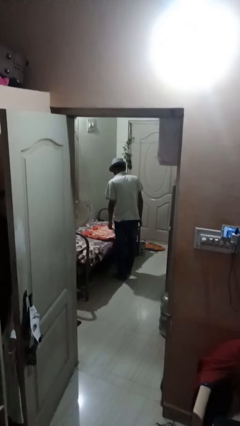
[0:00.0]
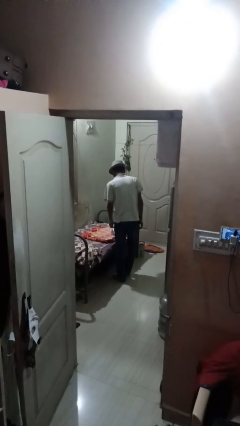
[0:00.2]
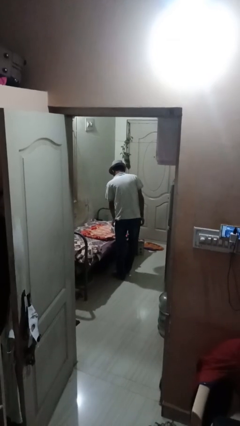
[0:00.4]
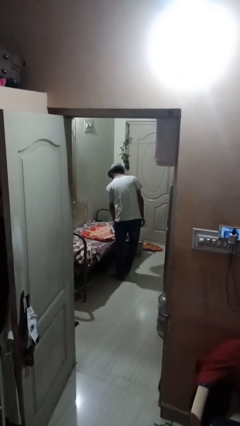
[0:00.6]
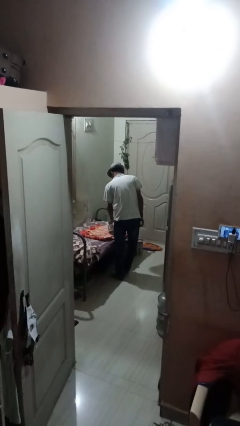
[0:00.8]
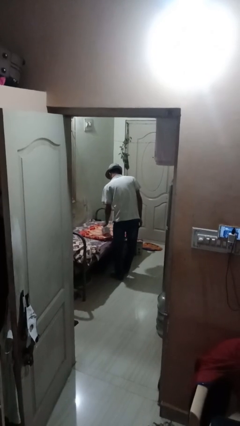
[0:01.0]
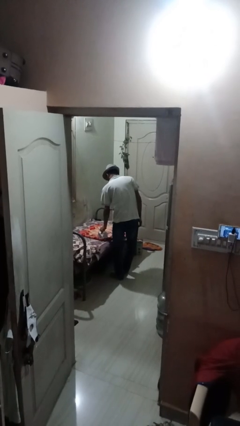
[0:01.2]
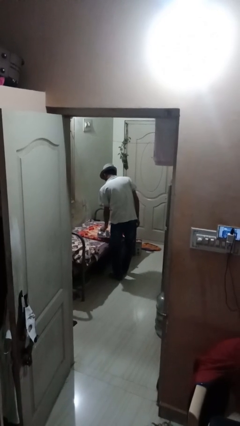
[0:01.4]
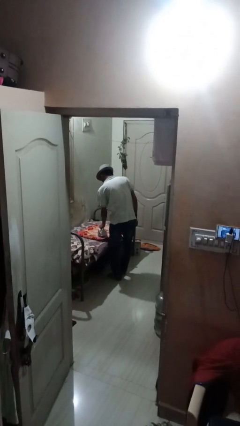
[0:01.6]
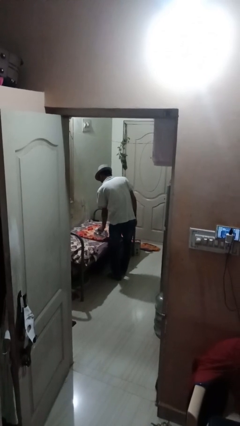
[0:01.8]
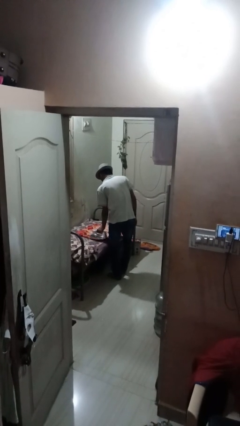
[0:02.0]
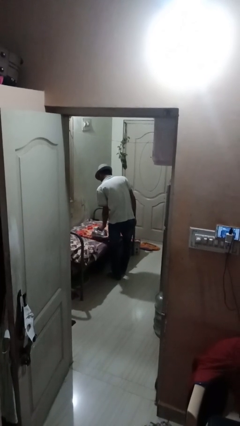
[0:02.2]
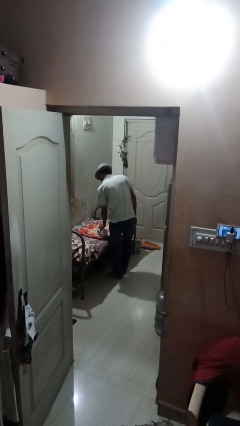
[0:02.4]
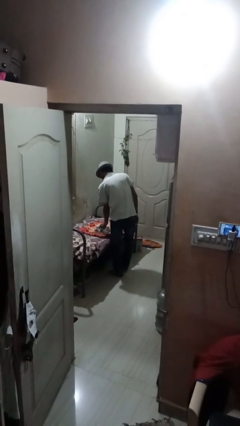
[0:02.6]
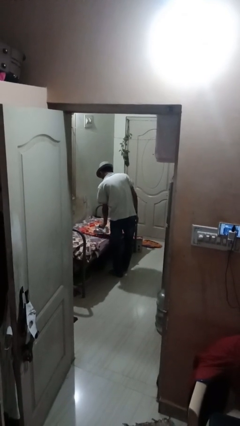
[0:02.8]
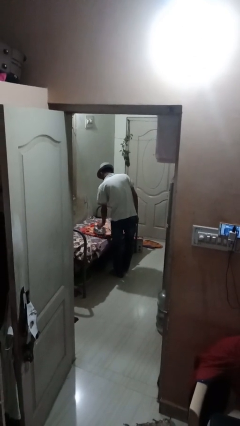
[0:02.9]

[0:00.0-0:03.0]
person irons clothes

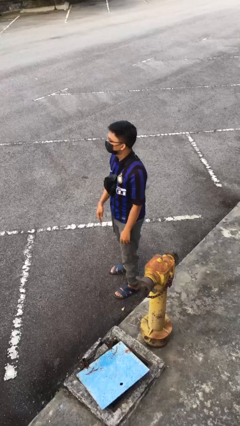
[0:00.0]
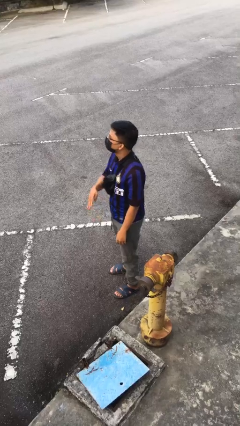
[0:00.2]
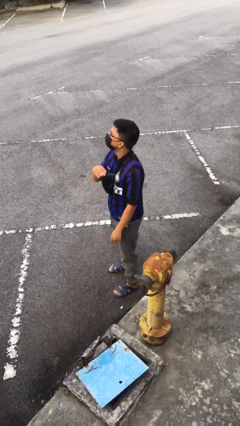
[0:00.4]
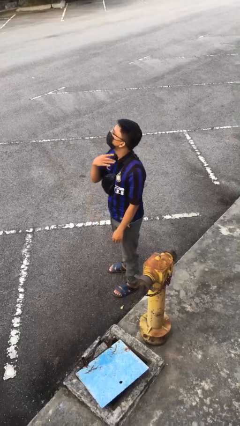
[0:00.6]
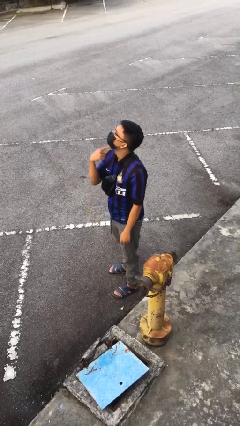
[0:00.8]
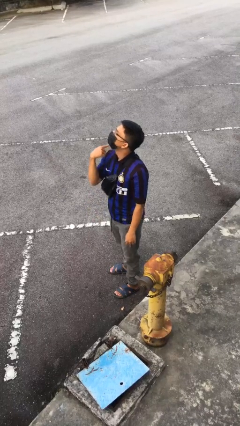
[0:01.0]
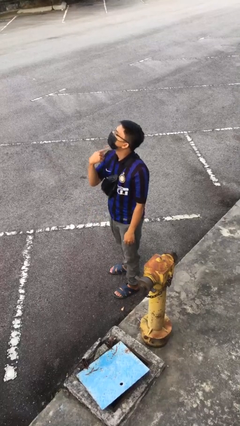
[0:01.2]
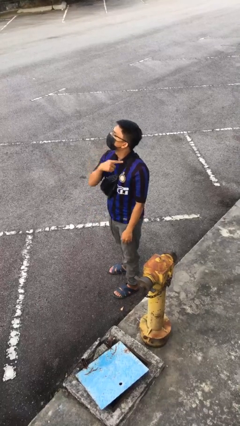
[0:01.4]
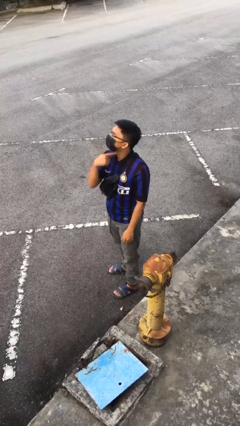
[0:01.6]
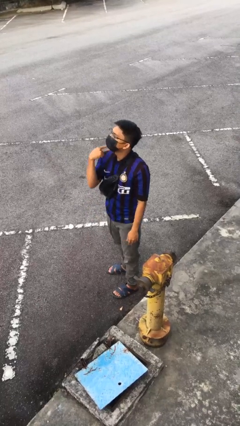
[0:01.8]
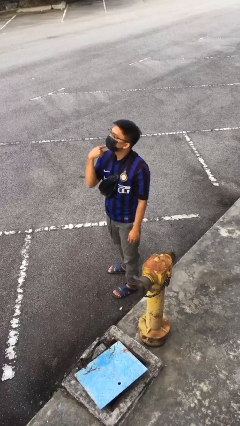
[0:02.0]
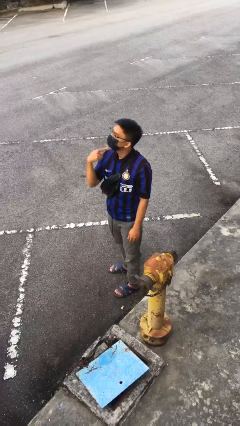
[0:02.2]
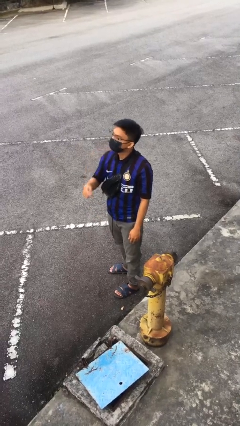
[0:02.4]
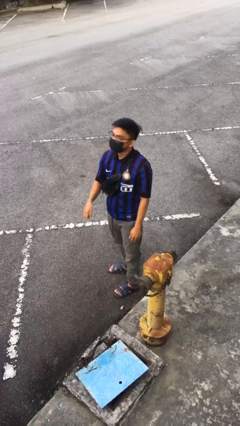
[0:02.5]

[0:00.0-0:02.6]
person gestures cut

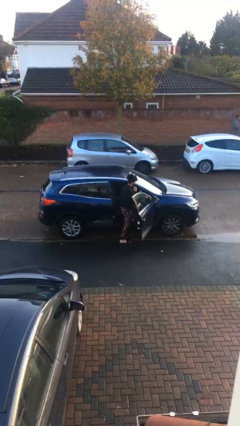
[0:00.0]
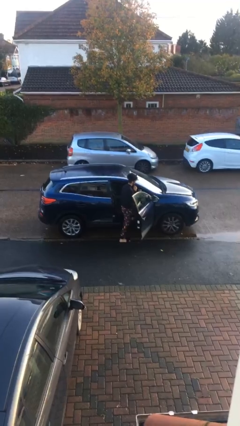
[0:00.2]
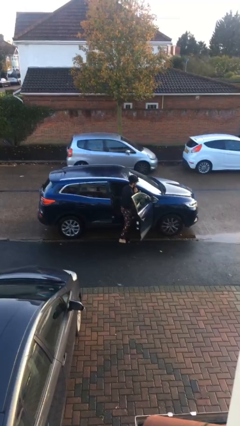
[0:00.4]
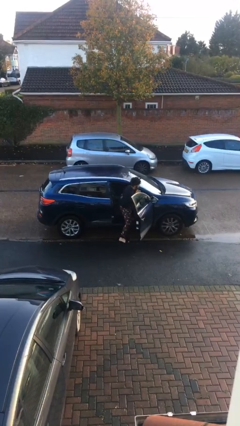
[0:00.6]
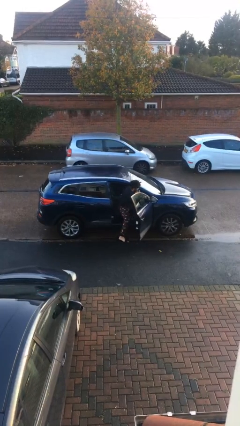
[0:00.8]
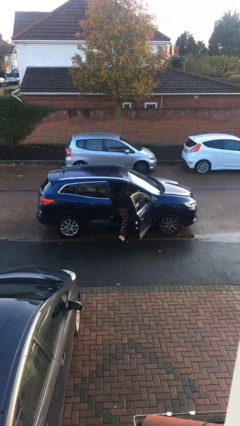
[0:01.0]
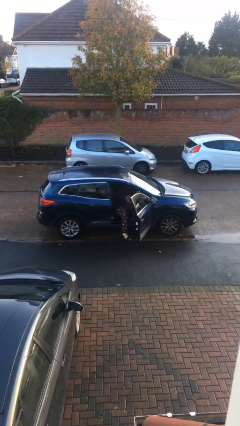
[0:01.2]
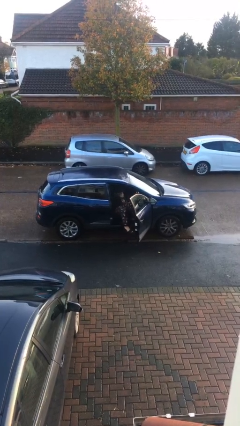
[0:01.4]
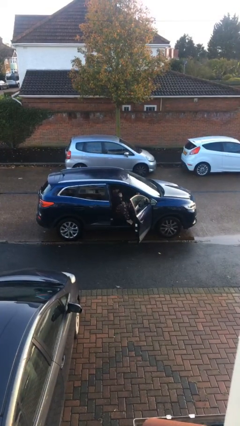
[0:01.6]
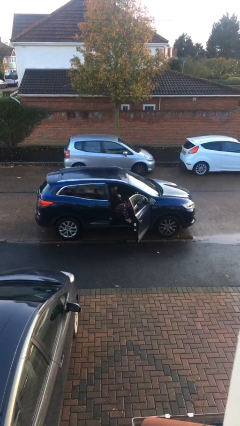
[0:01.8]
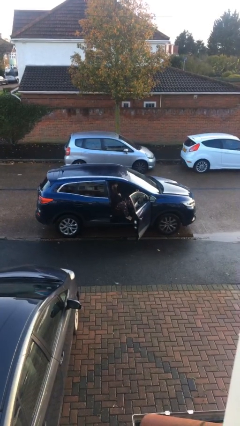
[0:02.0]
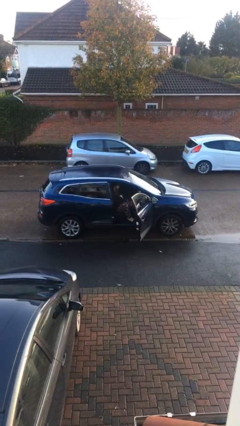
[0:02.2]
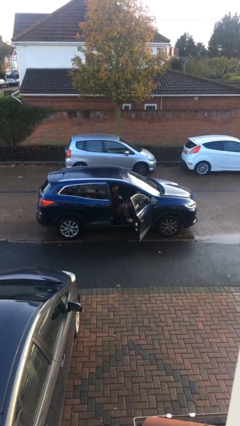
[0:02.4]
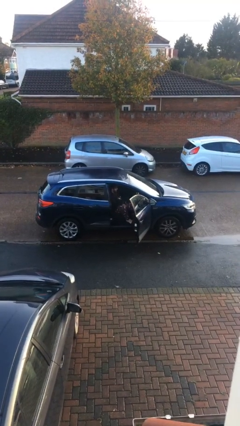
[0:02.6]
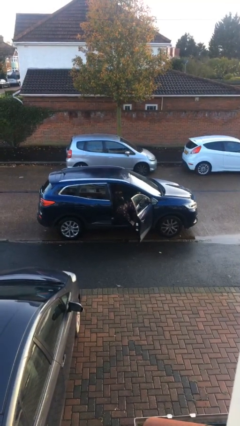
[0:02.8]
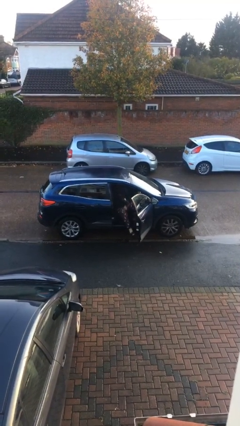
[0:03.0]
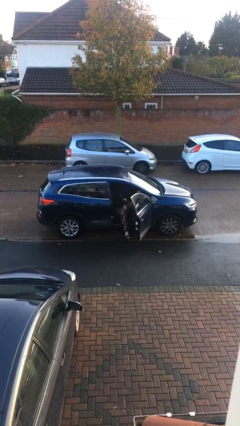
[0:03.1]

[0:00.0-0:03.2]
person enters car

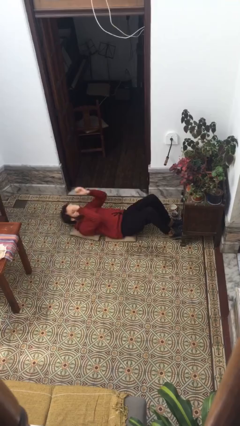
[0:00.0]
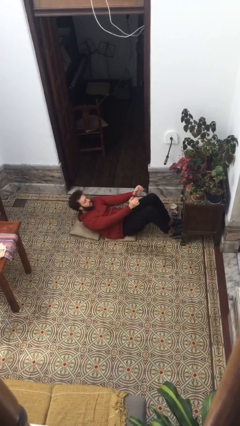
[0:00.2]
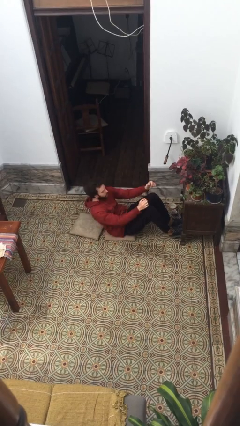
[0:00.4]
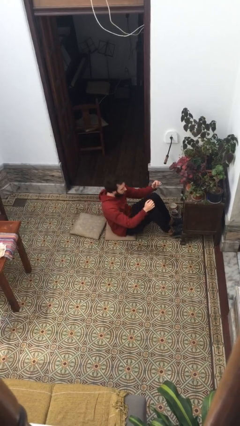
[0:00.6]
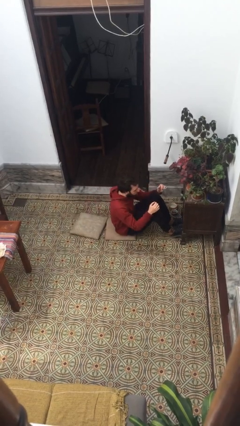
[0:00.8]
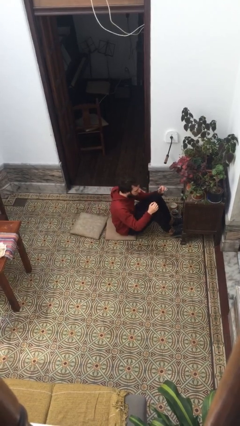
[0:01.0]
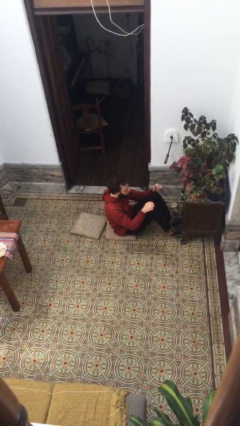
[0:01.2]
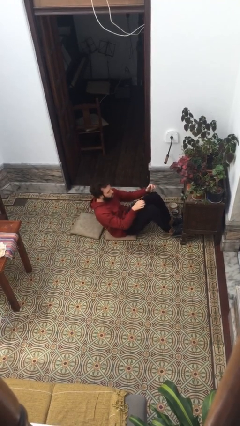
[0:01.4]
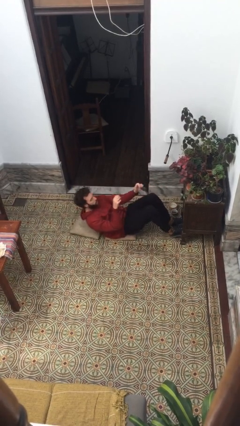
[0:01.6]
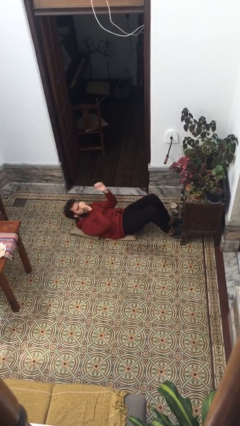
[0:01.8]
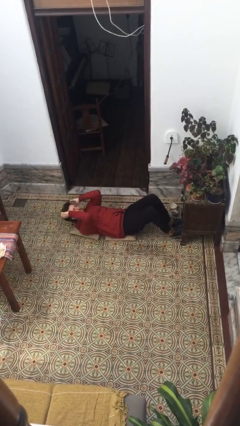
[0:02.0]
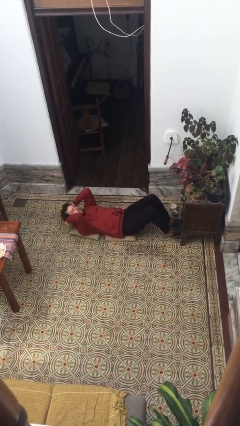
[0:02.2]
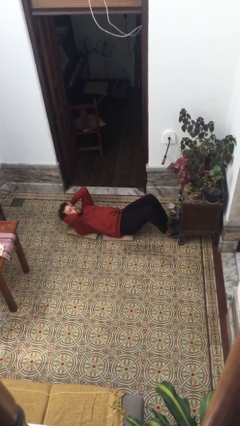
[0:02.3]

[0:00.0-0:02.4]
person exercises with situp

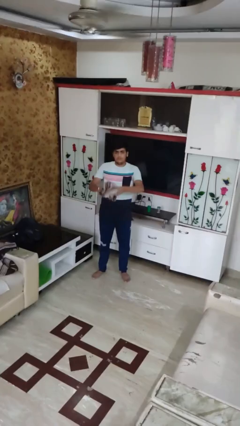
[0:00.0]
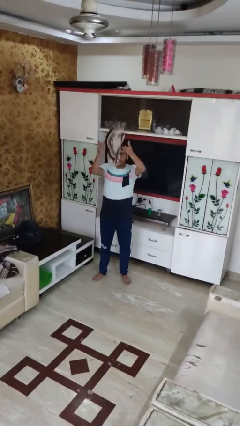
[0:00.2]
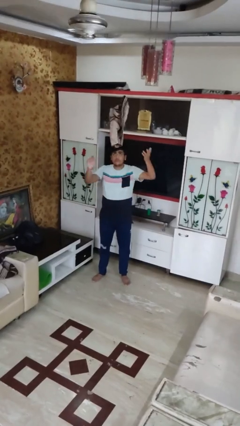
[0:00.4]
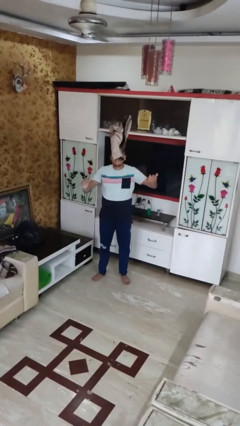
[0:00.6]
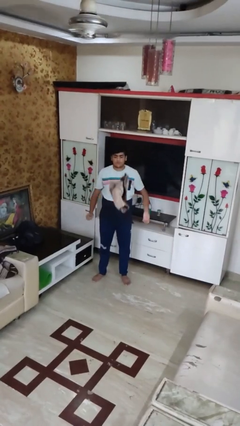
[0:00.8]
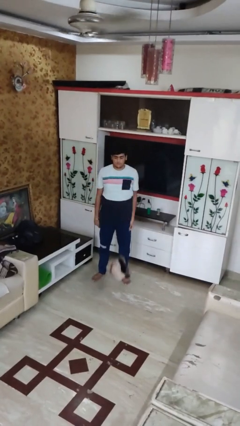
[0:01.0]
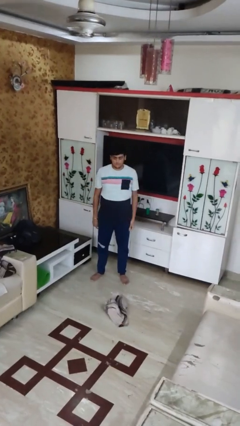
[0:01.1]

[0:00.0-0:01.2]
person throws object into air

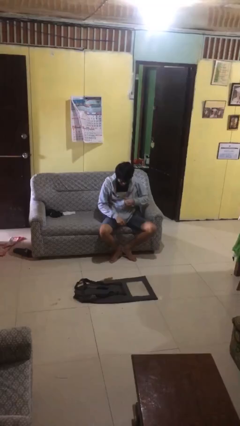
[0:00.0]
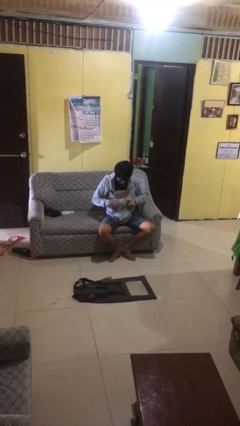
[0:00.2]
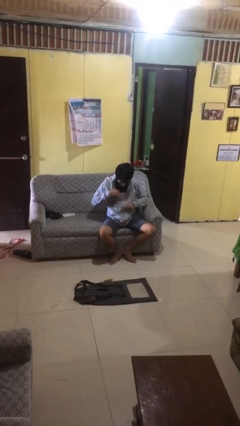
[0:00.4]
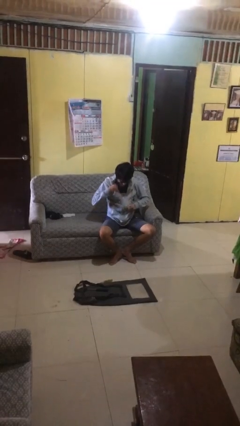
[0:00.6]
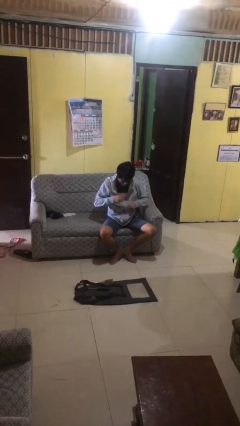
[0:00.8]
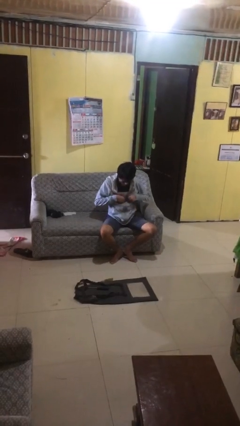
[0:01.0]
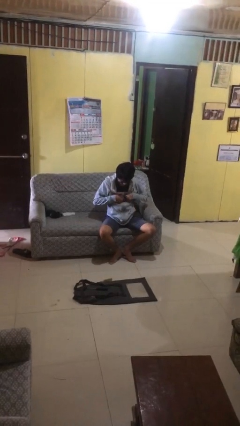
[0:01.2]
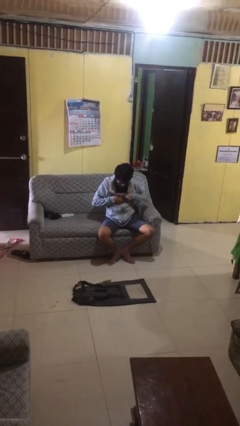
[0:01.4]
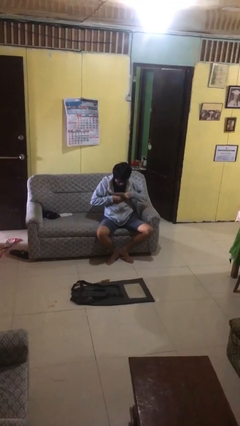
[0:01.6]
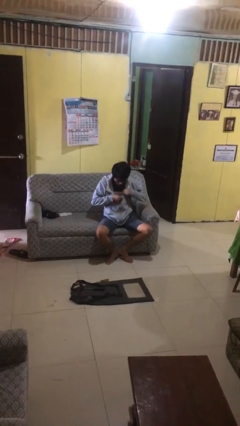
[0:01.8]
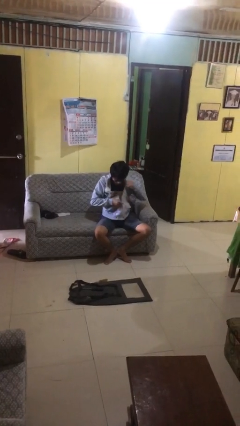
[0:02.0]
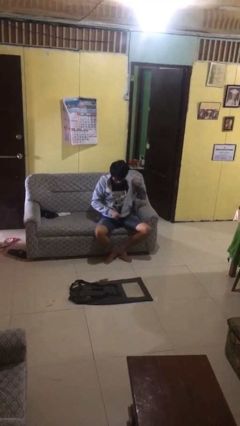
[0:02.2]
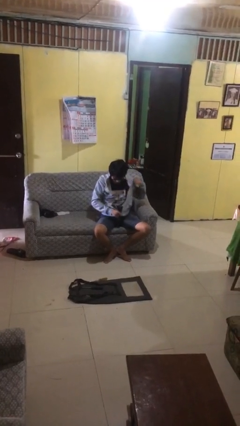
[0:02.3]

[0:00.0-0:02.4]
person unzips jacket

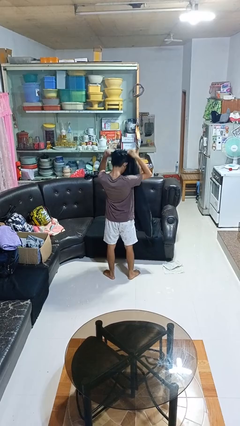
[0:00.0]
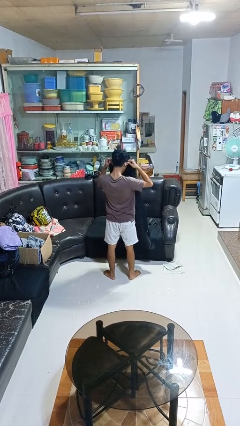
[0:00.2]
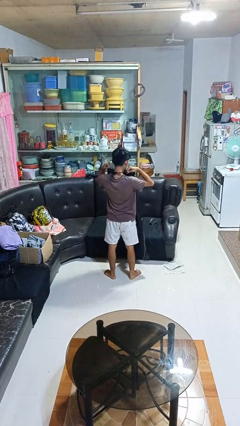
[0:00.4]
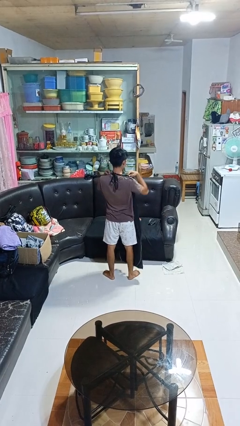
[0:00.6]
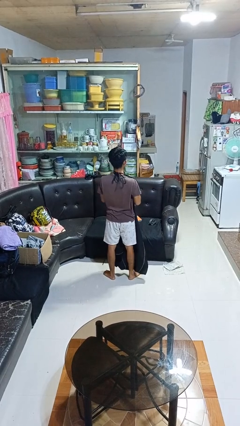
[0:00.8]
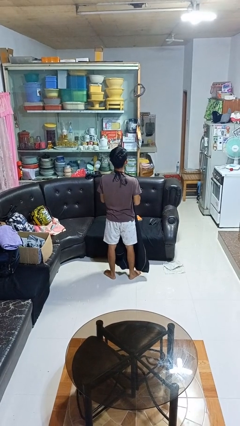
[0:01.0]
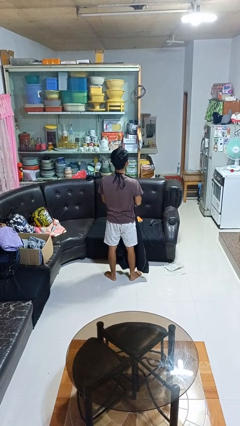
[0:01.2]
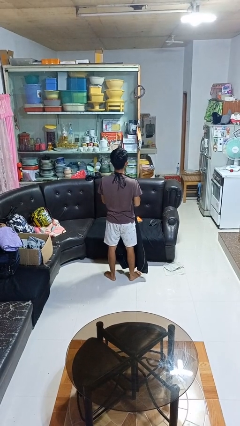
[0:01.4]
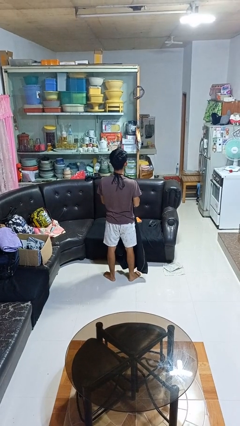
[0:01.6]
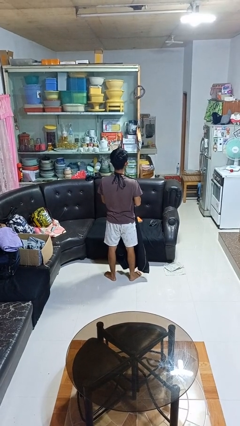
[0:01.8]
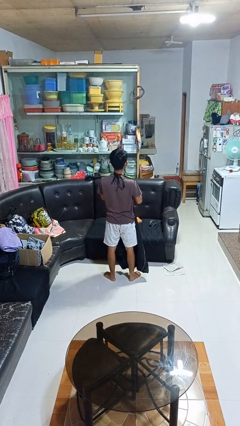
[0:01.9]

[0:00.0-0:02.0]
person puts on apron

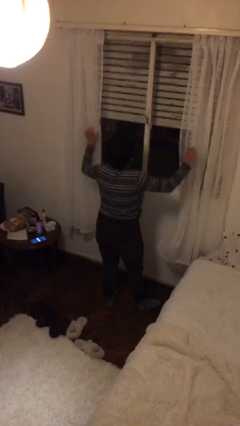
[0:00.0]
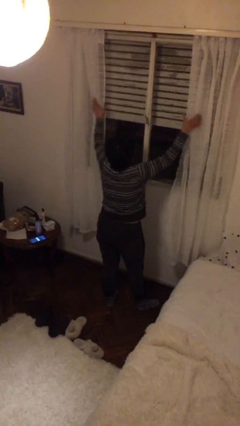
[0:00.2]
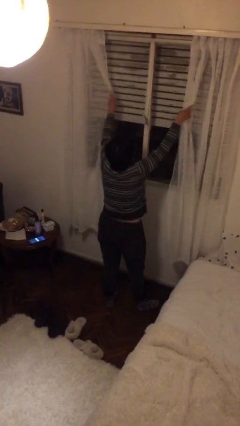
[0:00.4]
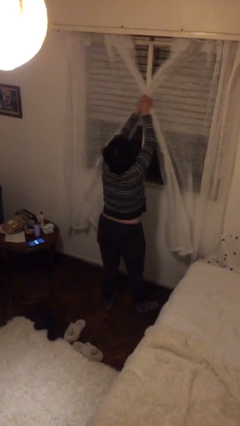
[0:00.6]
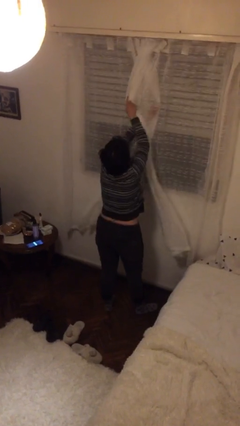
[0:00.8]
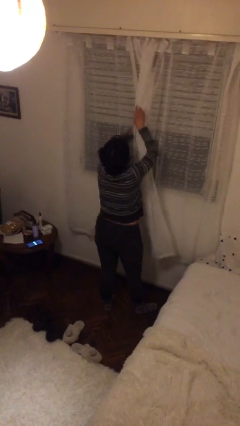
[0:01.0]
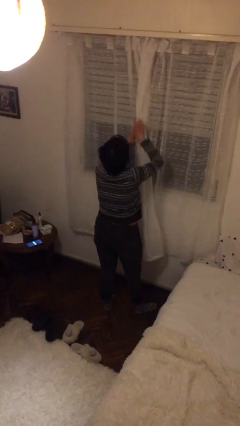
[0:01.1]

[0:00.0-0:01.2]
person closes curtains
